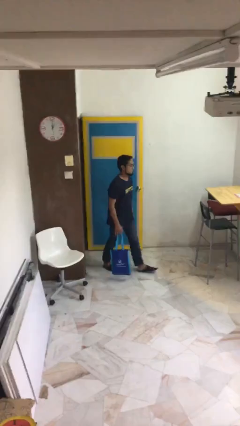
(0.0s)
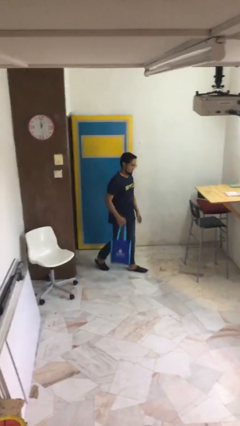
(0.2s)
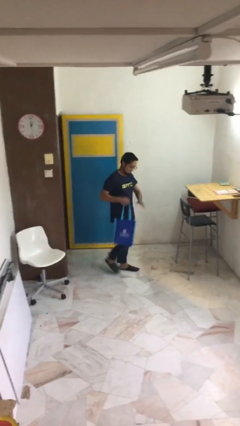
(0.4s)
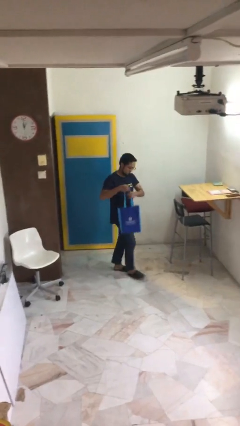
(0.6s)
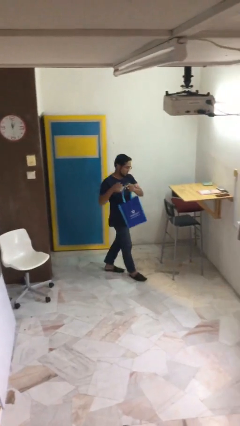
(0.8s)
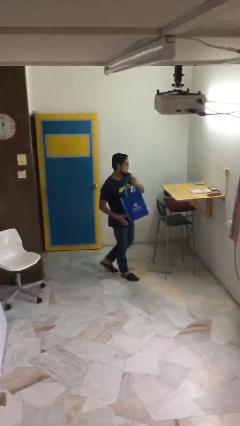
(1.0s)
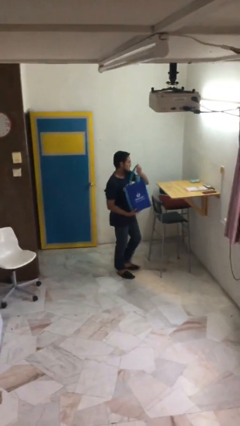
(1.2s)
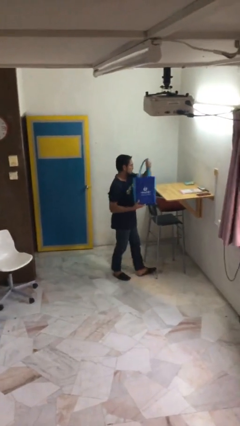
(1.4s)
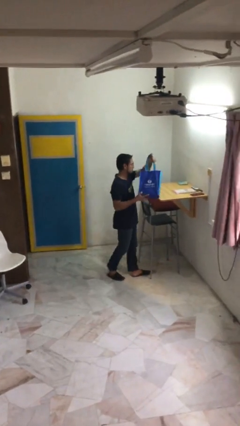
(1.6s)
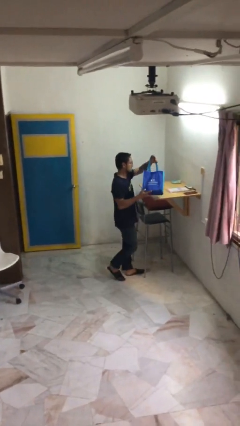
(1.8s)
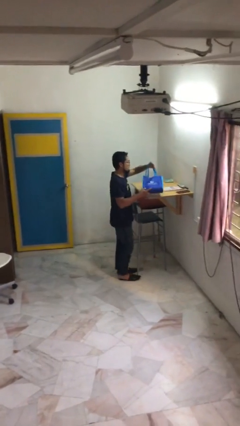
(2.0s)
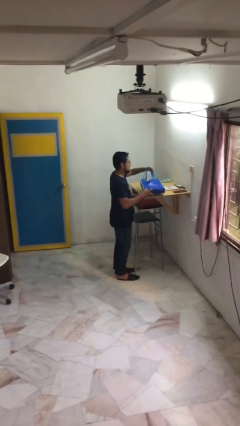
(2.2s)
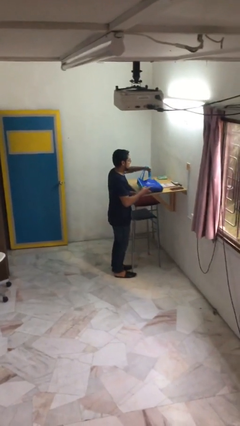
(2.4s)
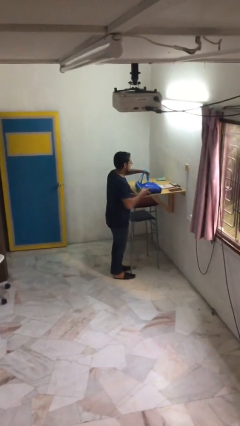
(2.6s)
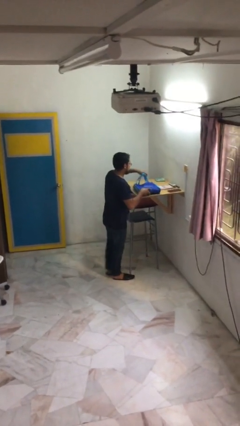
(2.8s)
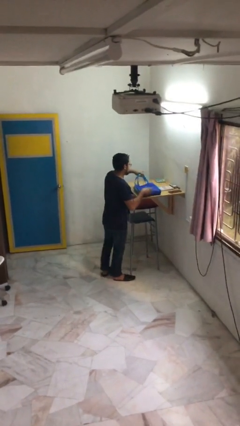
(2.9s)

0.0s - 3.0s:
person puts down object on table

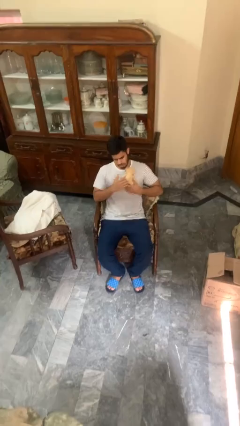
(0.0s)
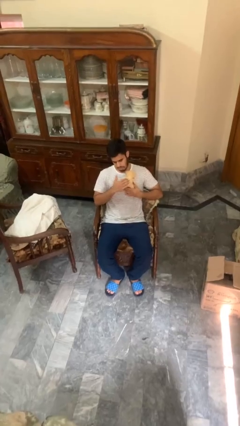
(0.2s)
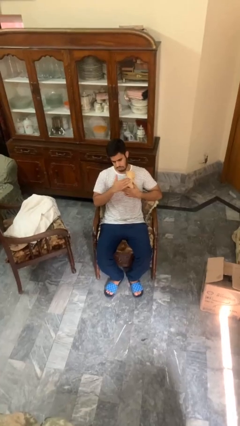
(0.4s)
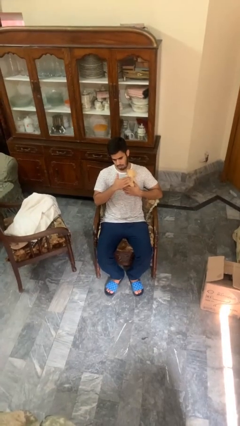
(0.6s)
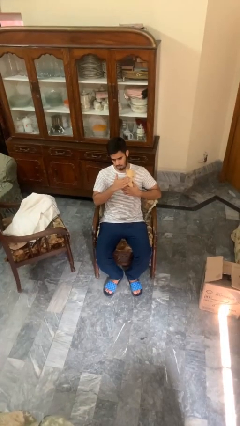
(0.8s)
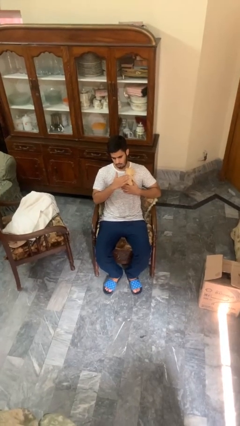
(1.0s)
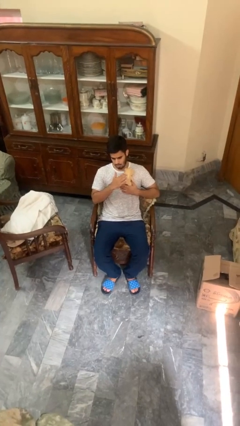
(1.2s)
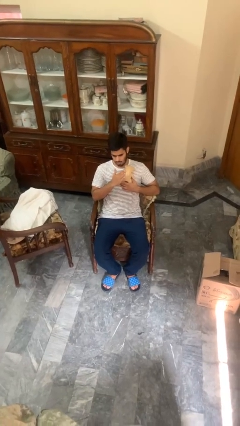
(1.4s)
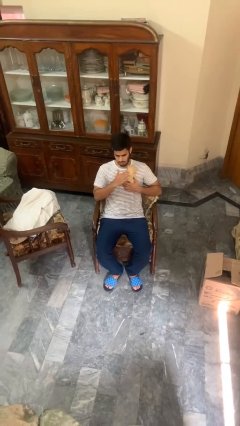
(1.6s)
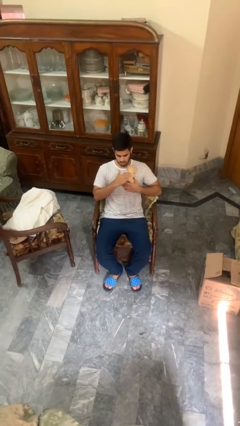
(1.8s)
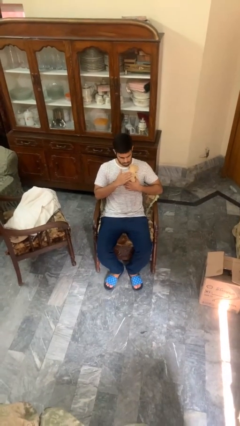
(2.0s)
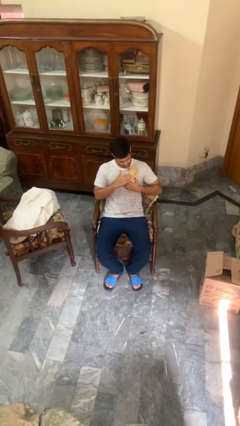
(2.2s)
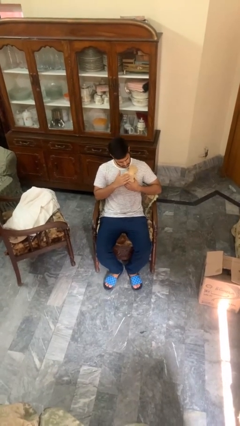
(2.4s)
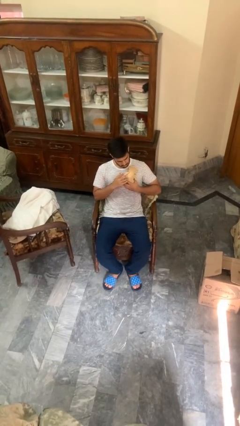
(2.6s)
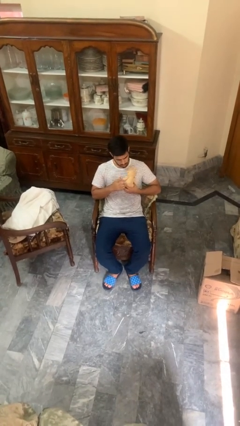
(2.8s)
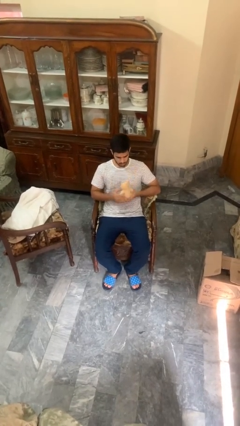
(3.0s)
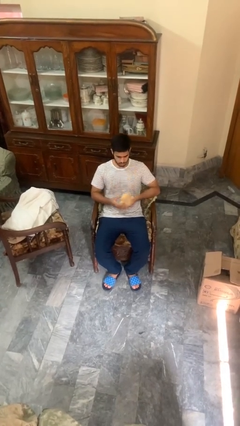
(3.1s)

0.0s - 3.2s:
person hugs stuffed animal

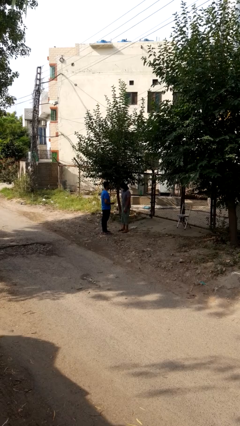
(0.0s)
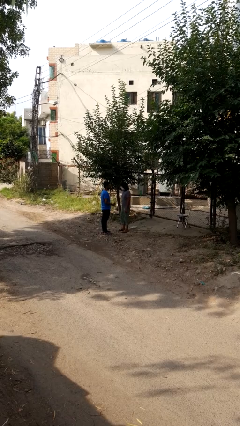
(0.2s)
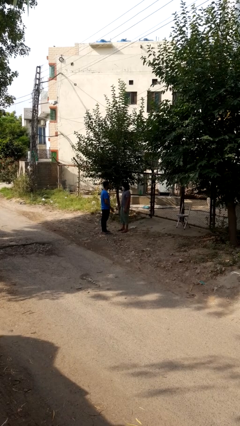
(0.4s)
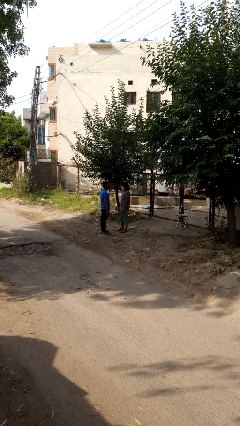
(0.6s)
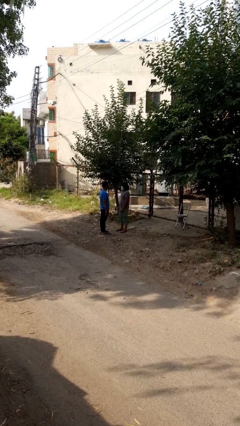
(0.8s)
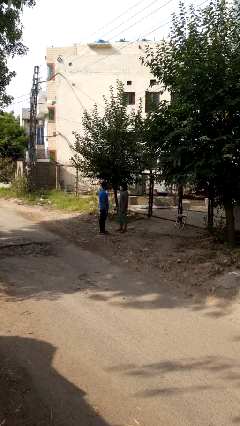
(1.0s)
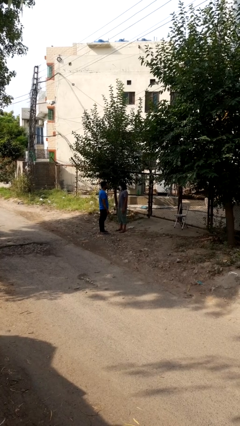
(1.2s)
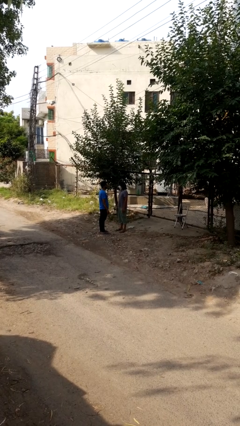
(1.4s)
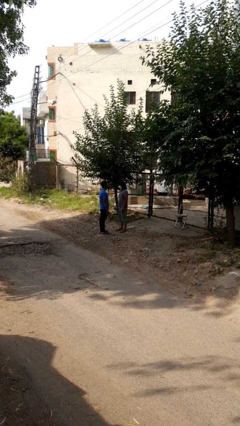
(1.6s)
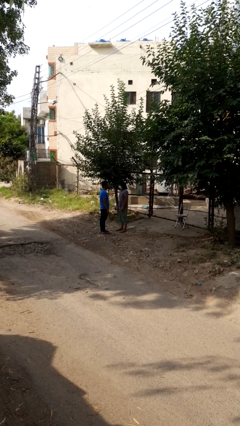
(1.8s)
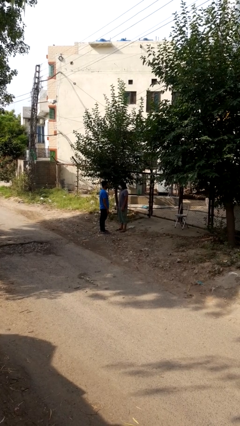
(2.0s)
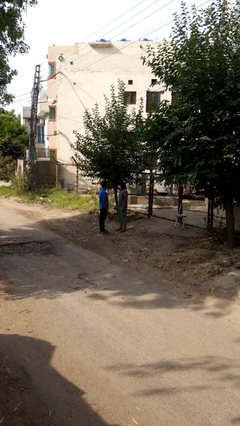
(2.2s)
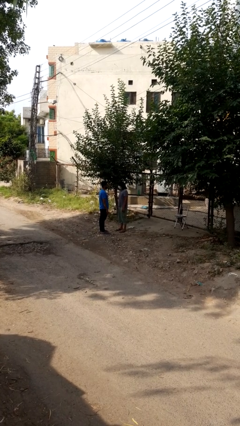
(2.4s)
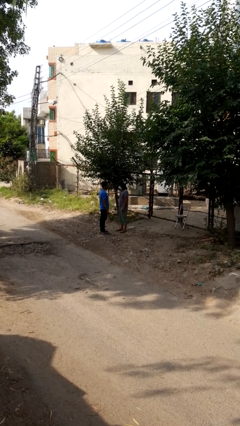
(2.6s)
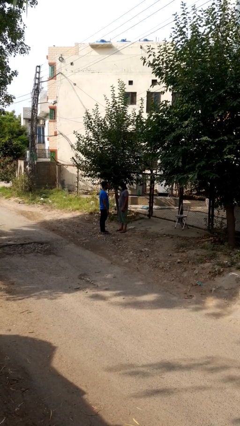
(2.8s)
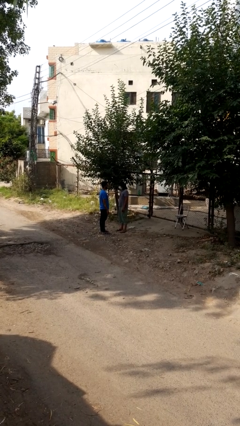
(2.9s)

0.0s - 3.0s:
person highfives hand

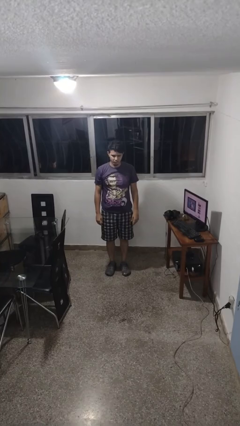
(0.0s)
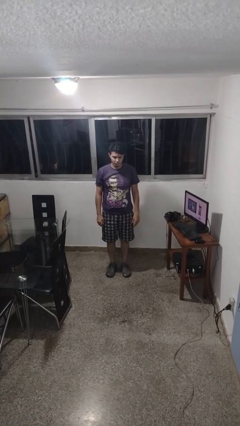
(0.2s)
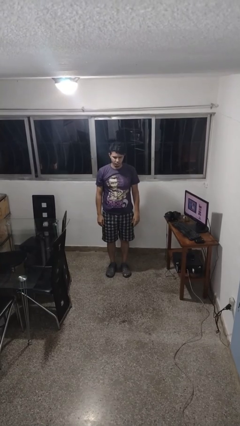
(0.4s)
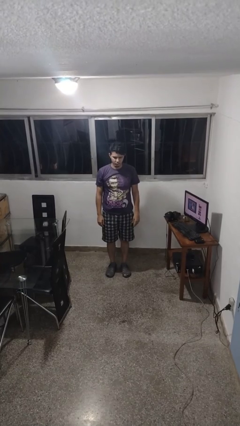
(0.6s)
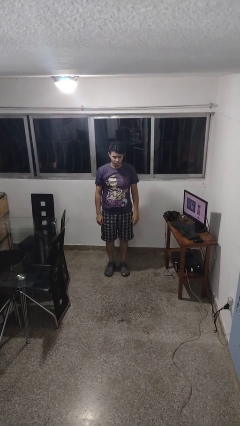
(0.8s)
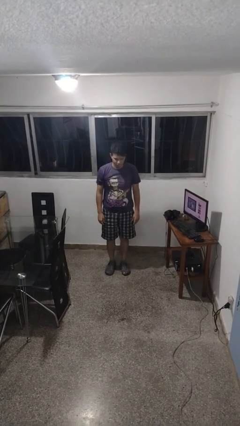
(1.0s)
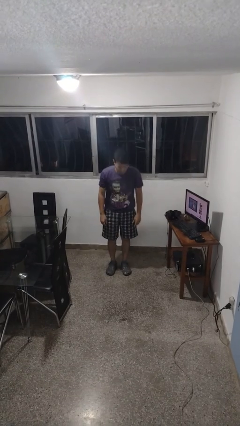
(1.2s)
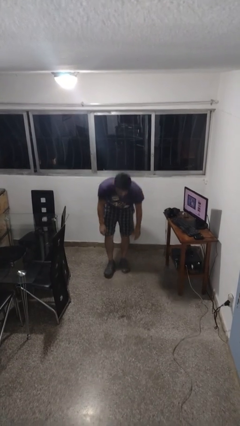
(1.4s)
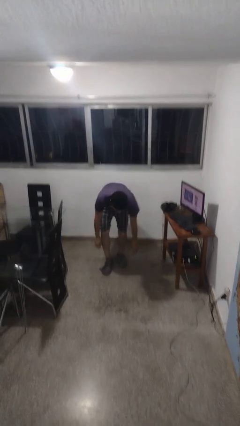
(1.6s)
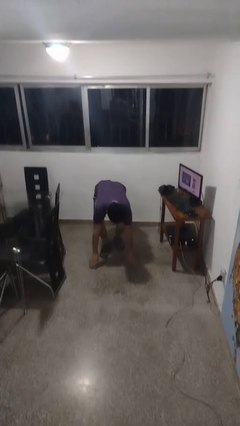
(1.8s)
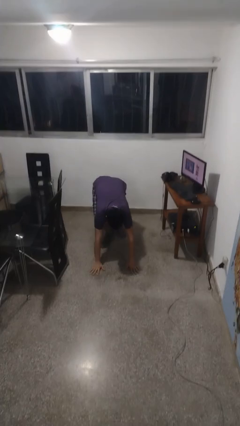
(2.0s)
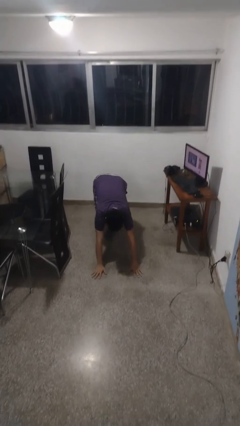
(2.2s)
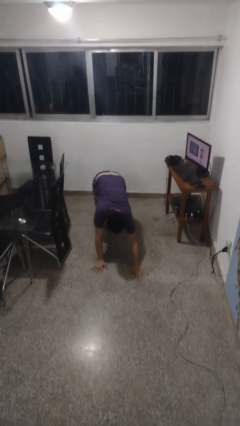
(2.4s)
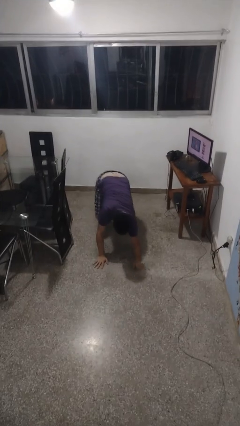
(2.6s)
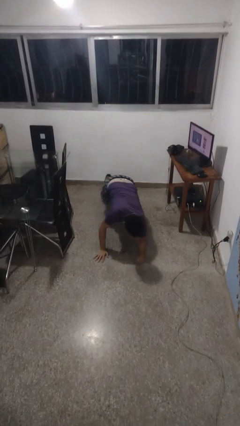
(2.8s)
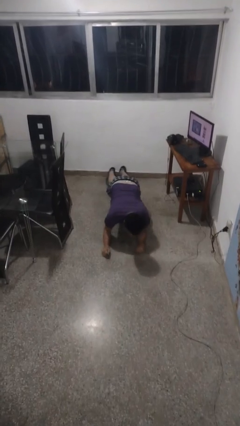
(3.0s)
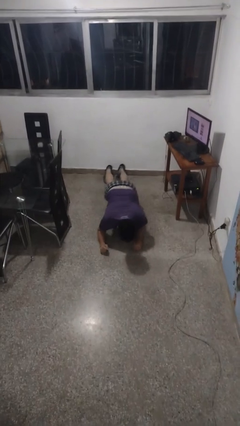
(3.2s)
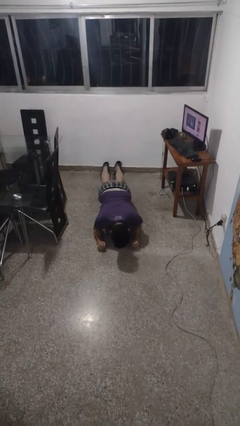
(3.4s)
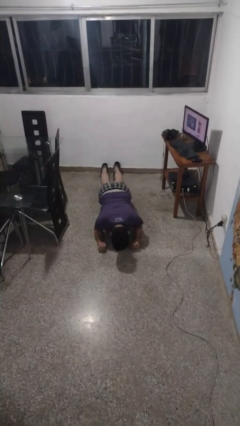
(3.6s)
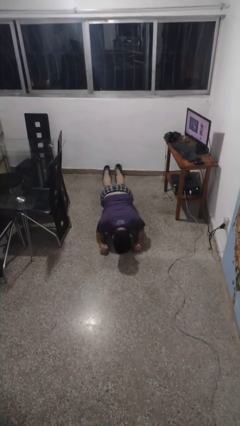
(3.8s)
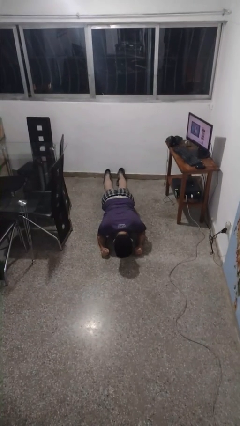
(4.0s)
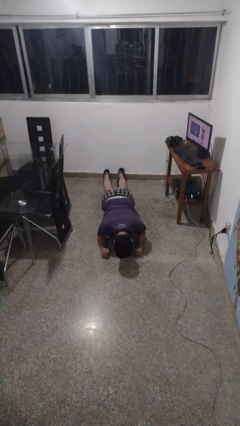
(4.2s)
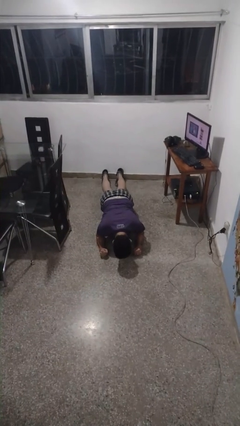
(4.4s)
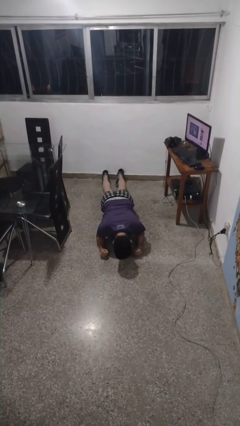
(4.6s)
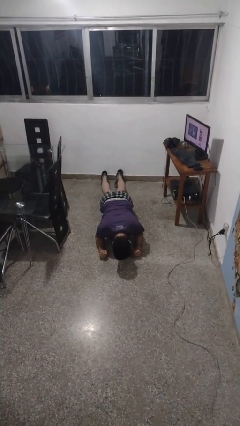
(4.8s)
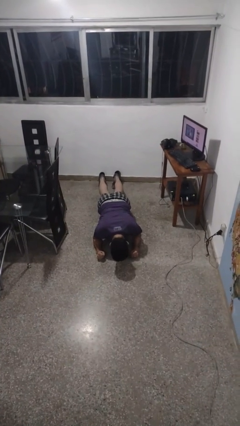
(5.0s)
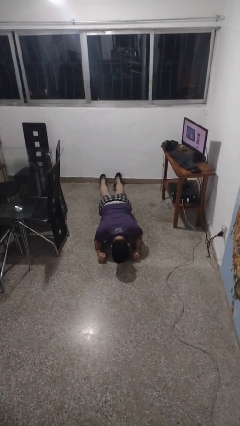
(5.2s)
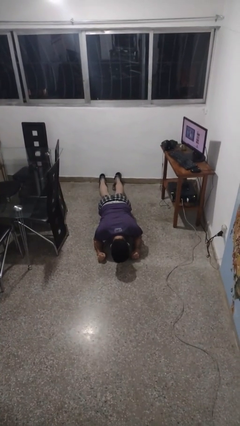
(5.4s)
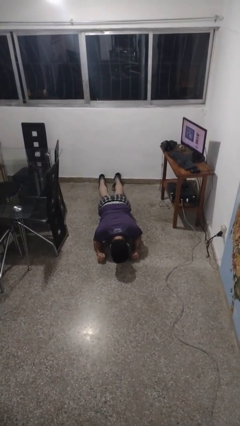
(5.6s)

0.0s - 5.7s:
person exercises with plank

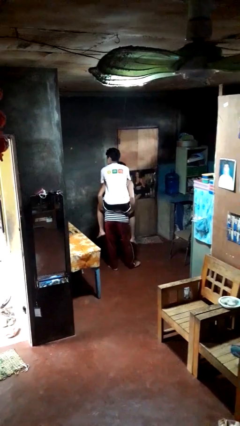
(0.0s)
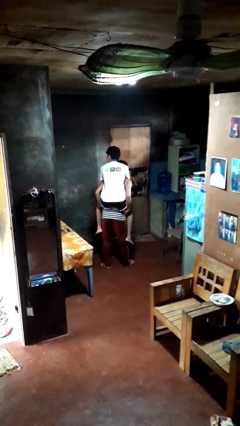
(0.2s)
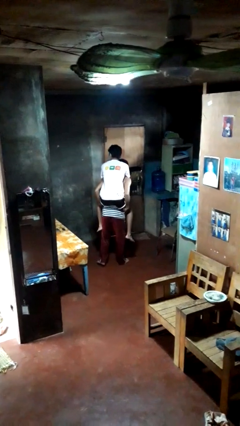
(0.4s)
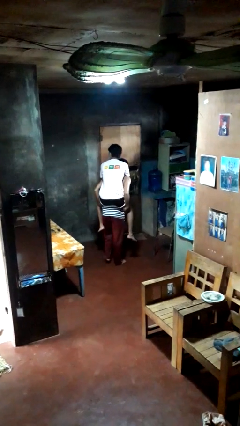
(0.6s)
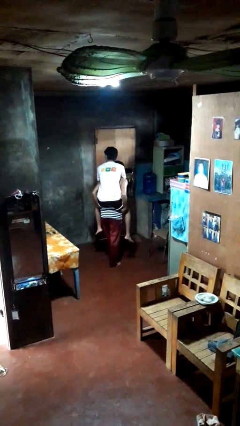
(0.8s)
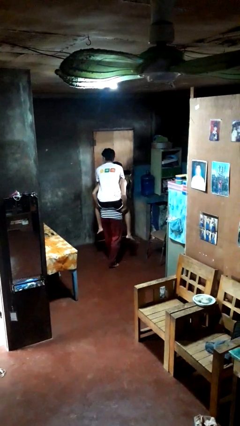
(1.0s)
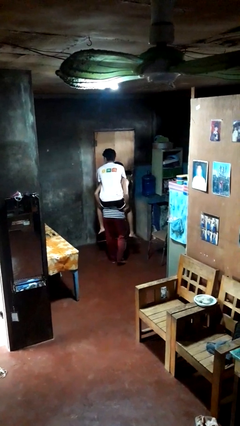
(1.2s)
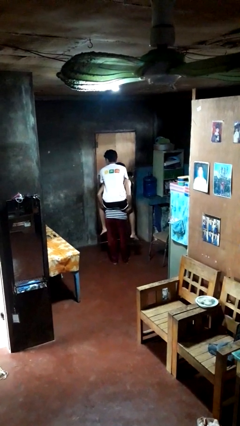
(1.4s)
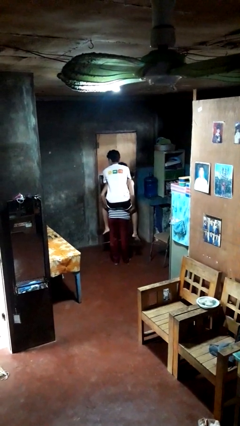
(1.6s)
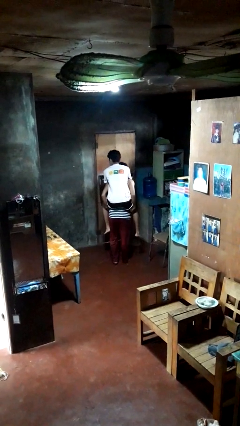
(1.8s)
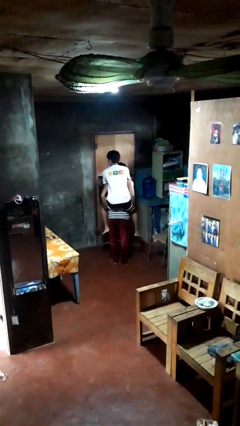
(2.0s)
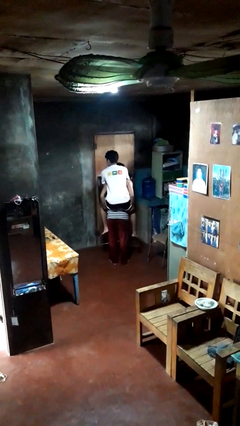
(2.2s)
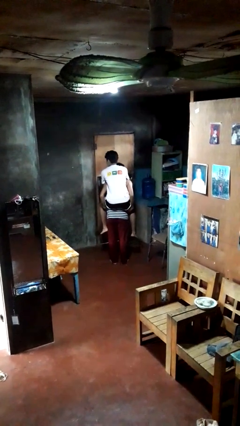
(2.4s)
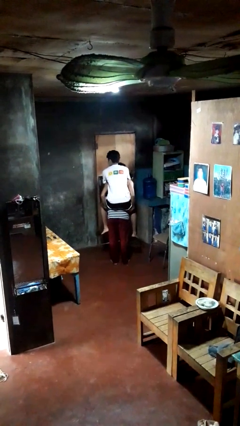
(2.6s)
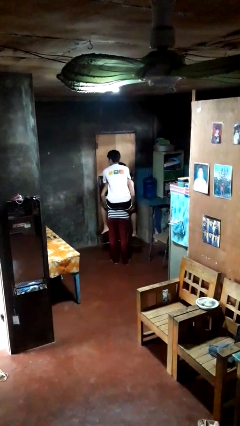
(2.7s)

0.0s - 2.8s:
person carries person on back
